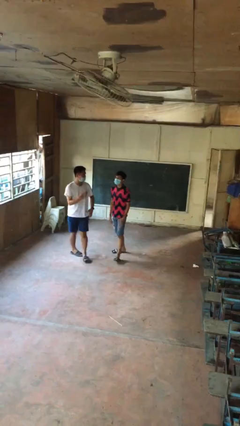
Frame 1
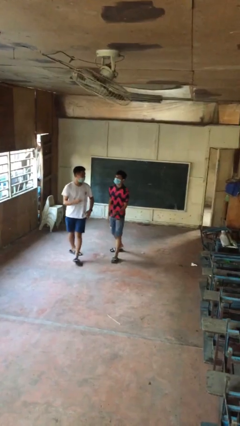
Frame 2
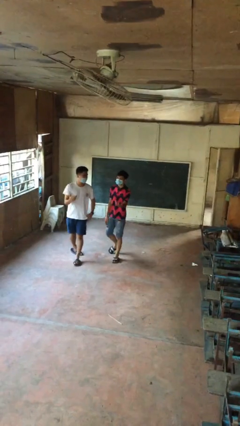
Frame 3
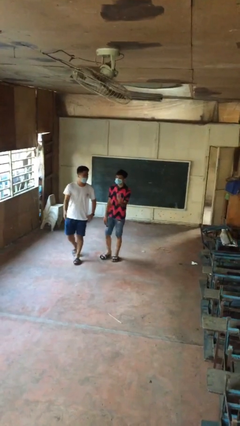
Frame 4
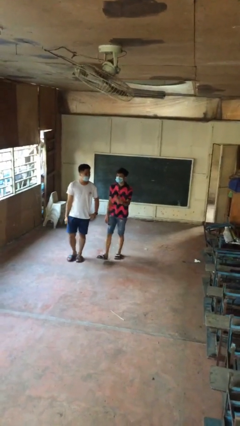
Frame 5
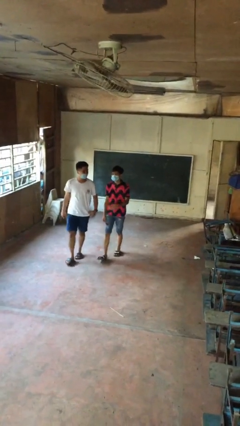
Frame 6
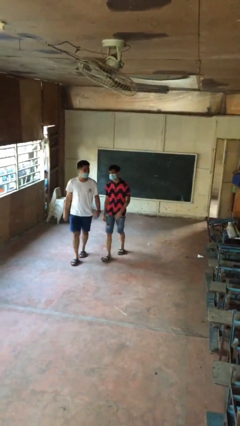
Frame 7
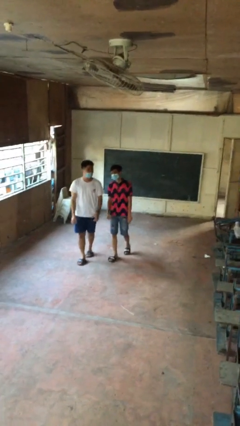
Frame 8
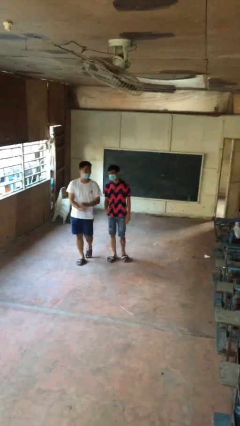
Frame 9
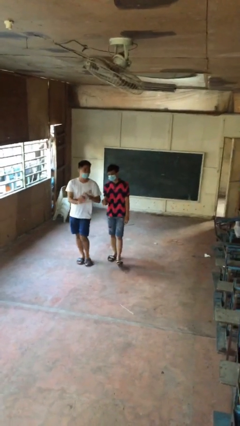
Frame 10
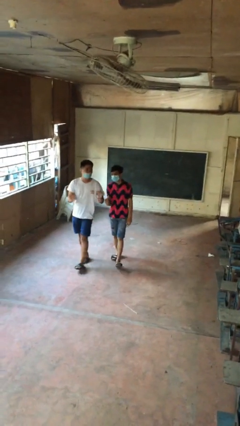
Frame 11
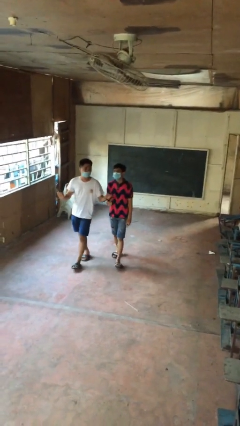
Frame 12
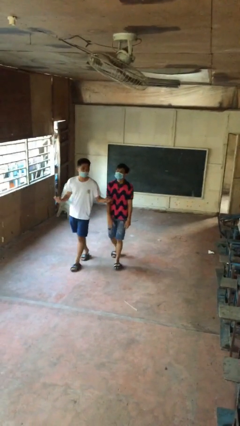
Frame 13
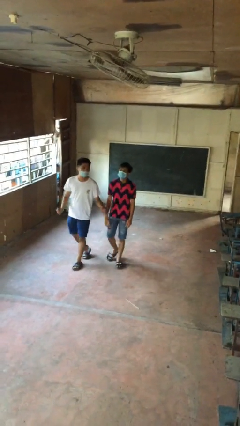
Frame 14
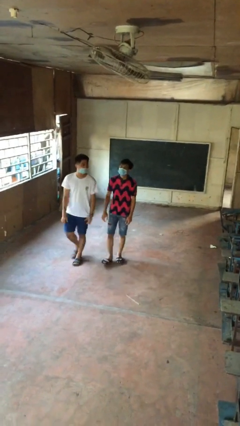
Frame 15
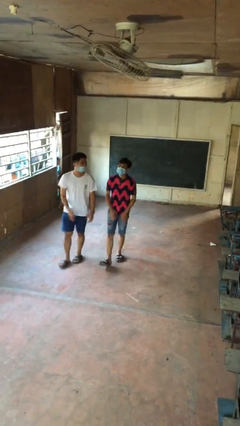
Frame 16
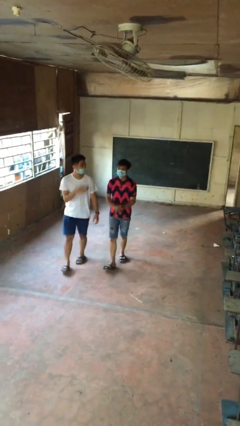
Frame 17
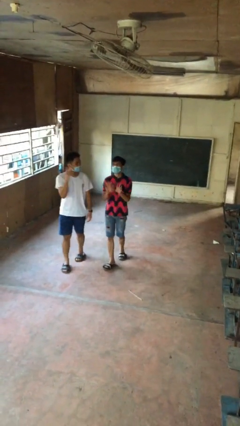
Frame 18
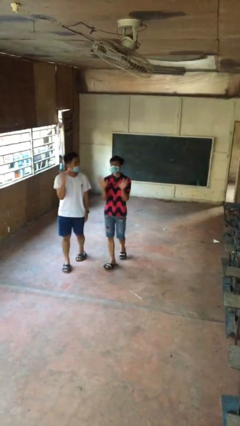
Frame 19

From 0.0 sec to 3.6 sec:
person talks to person

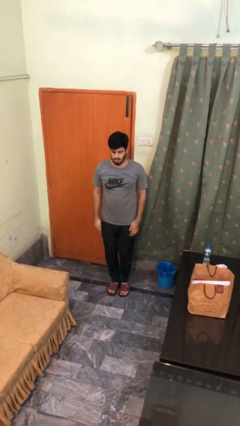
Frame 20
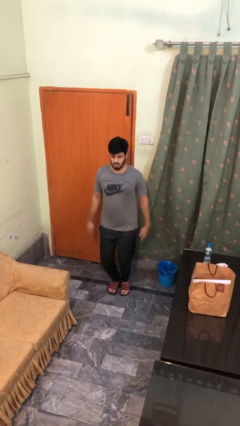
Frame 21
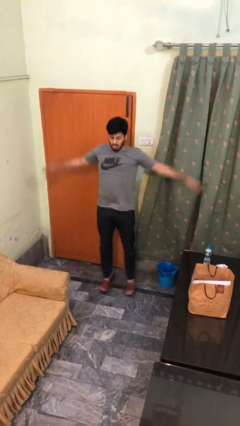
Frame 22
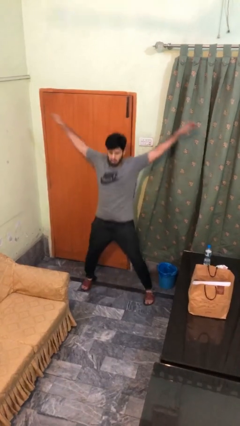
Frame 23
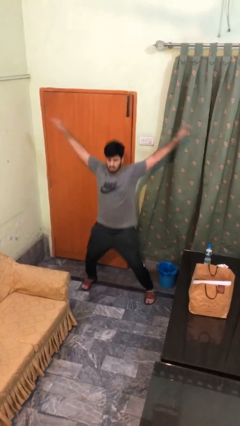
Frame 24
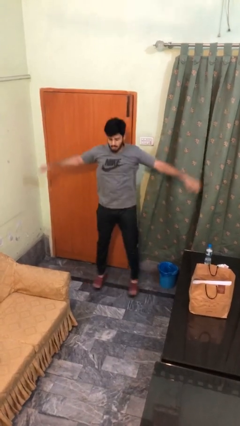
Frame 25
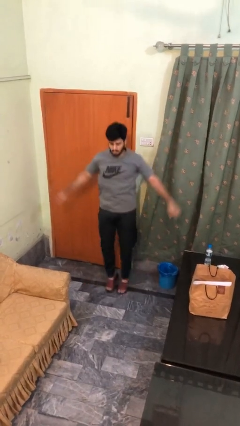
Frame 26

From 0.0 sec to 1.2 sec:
person exercises with jumping jacks

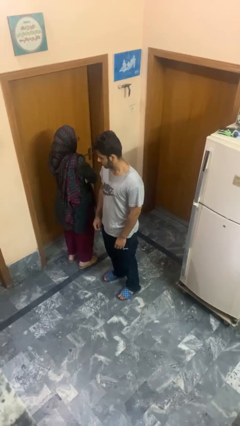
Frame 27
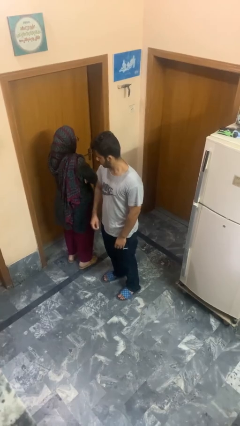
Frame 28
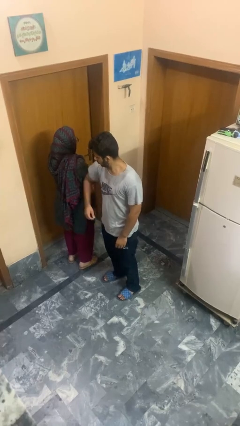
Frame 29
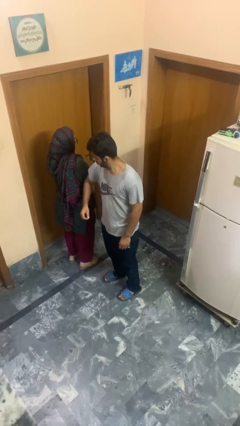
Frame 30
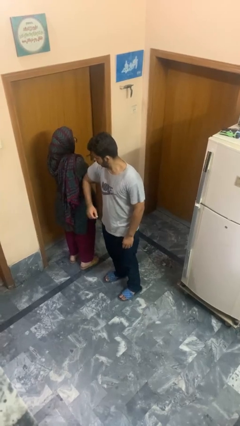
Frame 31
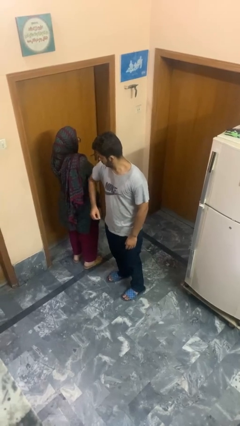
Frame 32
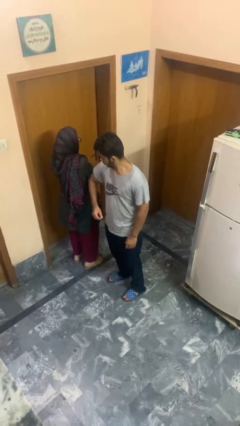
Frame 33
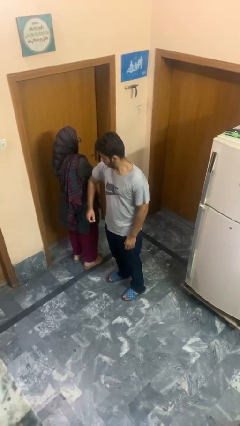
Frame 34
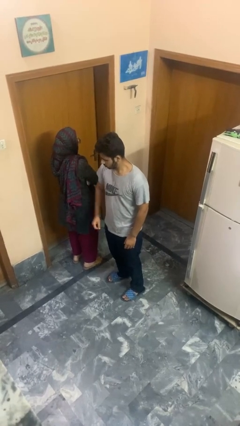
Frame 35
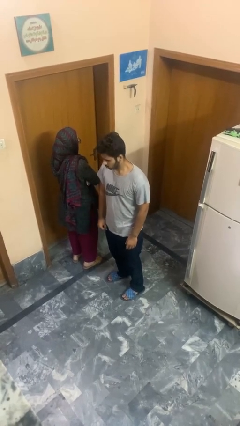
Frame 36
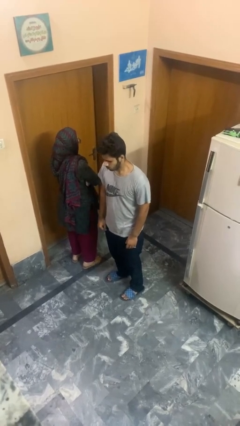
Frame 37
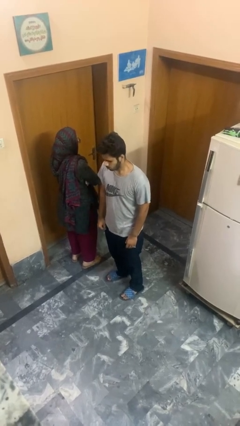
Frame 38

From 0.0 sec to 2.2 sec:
person nudges person with elbow

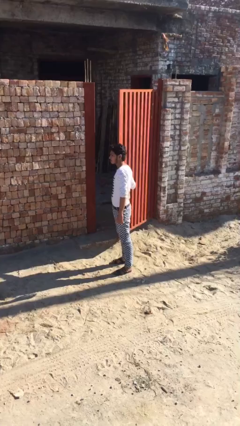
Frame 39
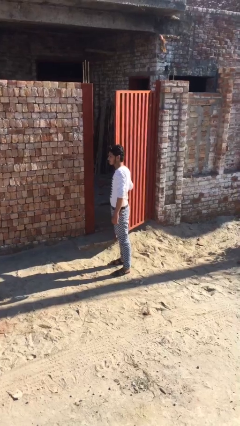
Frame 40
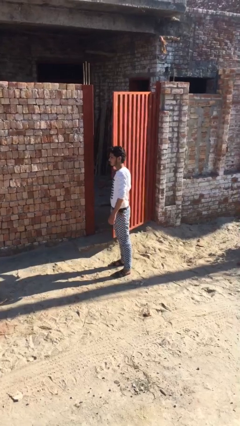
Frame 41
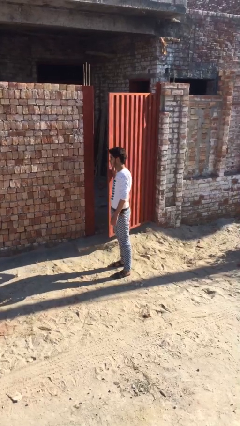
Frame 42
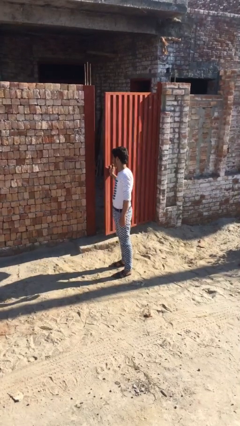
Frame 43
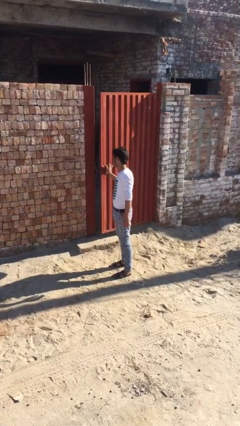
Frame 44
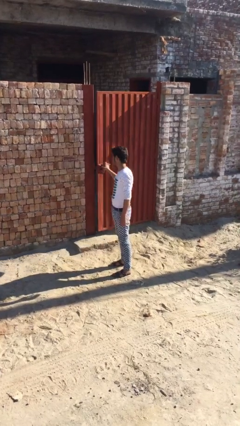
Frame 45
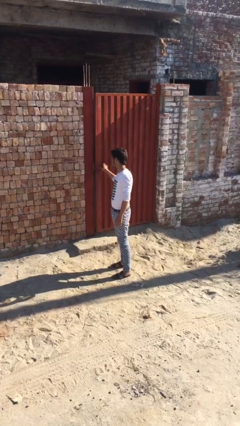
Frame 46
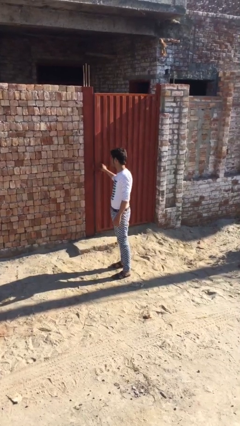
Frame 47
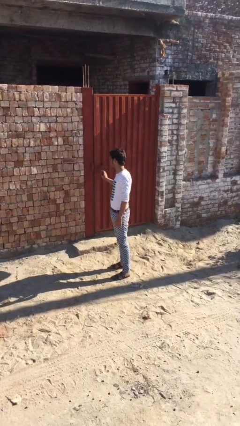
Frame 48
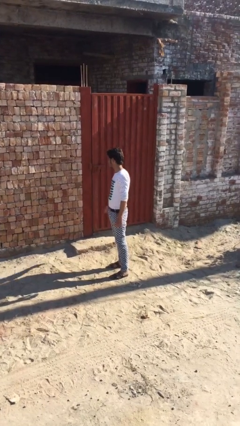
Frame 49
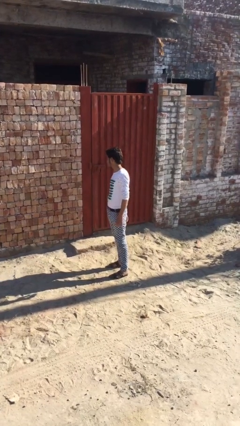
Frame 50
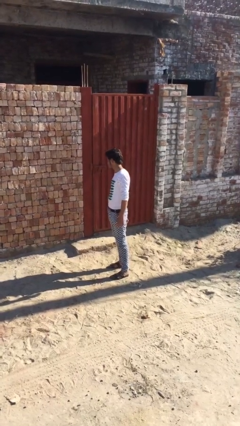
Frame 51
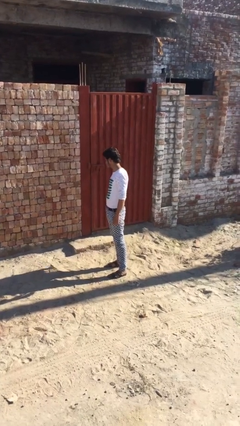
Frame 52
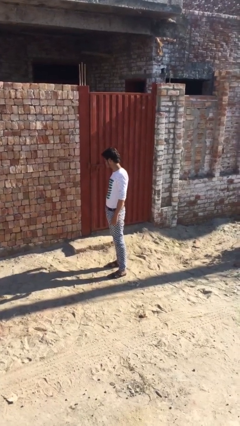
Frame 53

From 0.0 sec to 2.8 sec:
person closes facility door

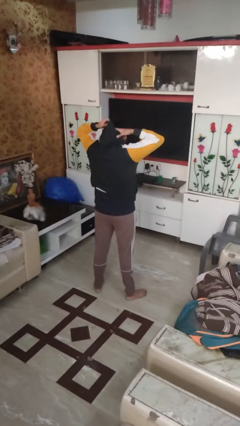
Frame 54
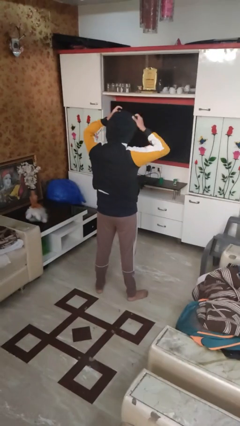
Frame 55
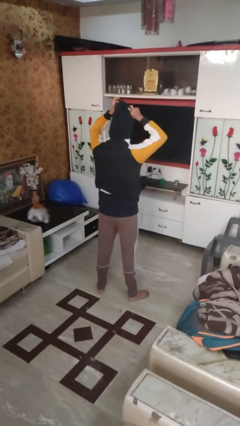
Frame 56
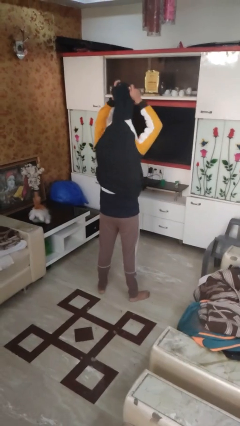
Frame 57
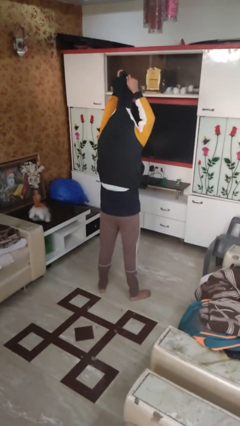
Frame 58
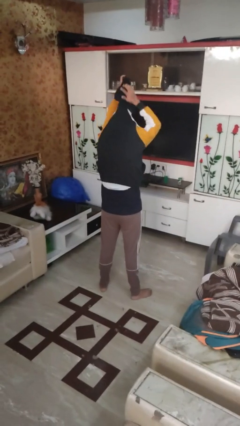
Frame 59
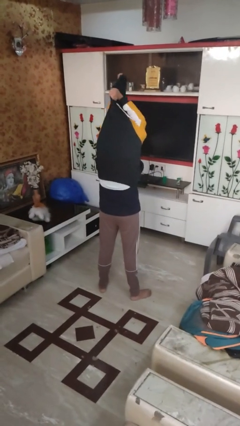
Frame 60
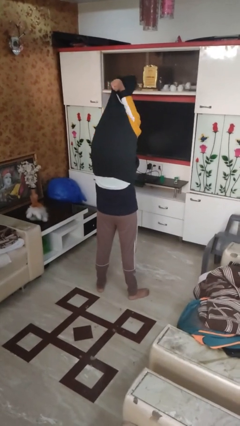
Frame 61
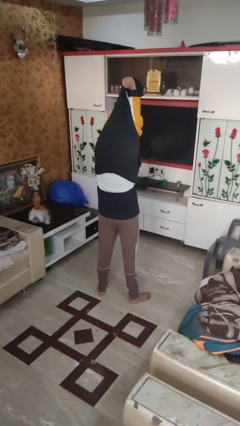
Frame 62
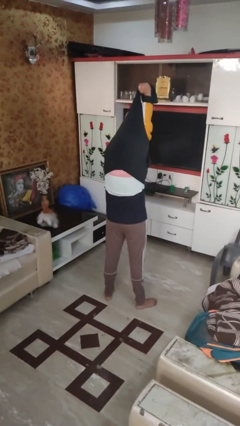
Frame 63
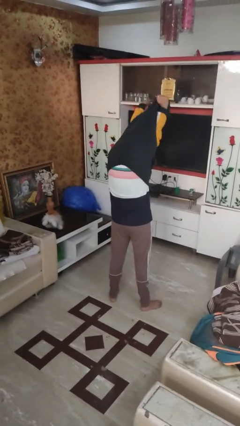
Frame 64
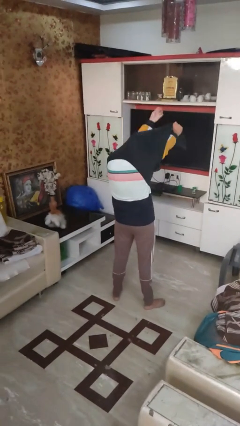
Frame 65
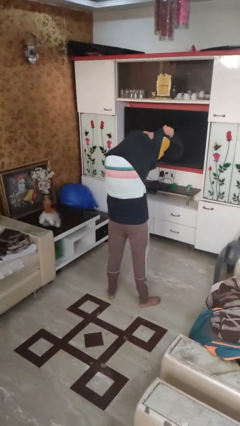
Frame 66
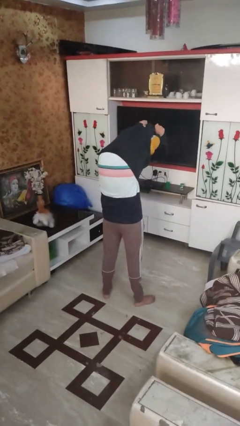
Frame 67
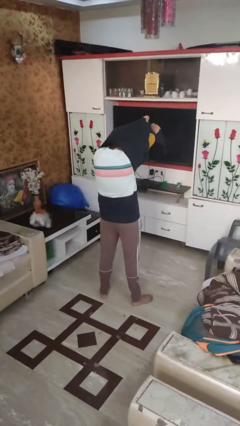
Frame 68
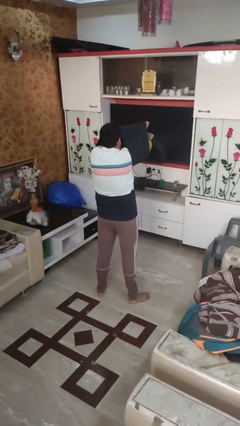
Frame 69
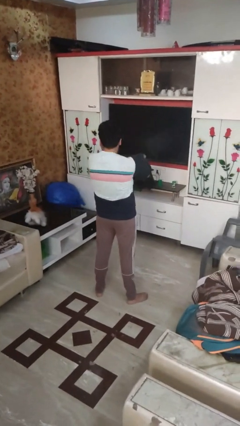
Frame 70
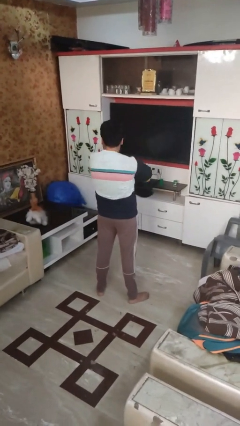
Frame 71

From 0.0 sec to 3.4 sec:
person takes off hoodie

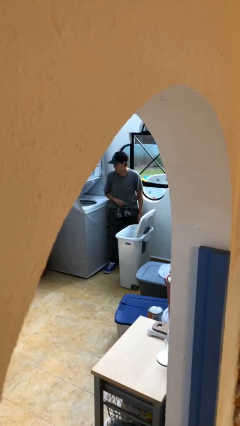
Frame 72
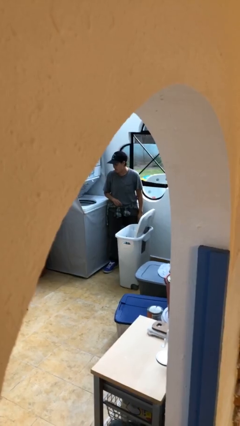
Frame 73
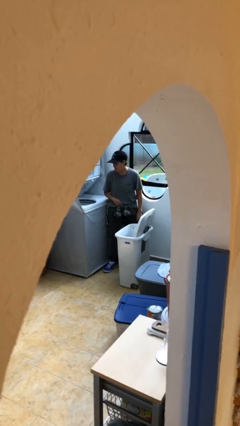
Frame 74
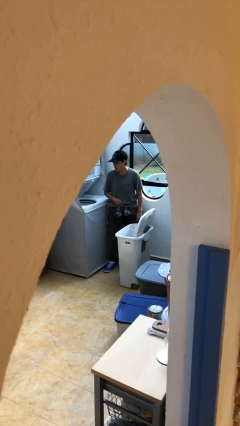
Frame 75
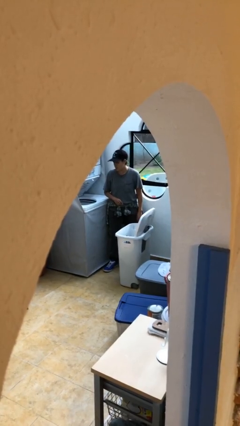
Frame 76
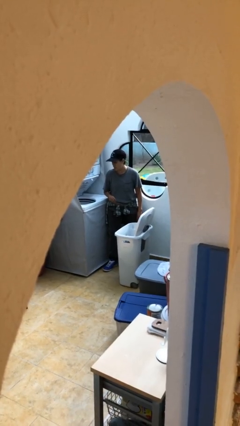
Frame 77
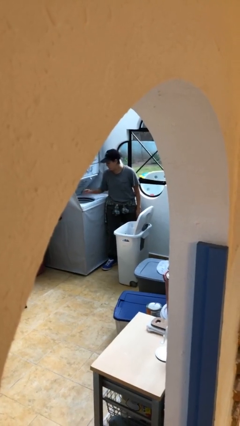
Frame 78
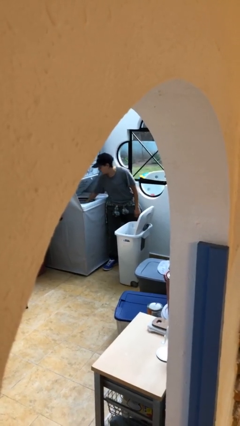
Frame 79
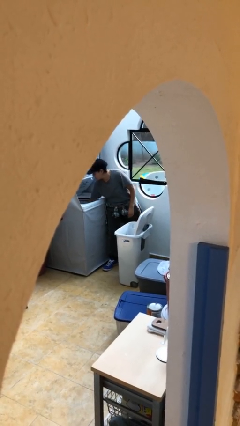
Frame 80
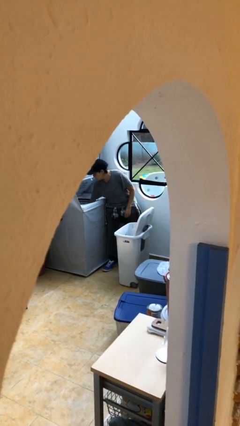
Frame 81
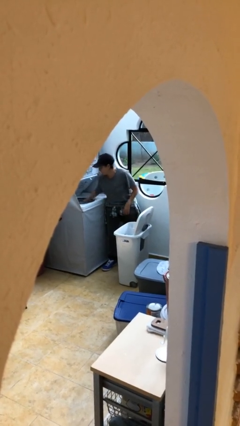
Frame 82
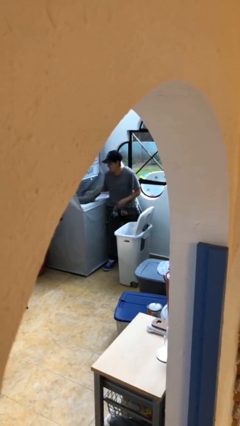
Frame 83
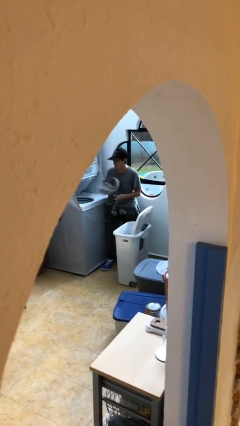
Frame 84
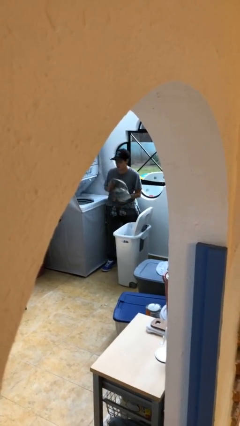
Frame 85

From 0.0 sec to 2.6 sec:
person loads clotheswasher

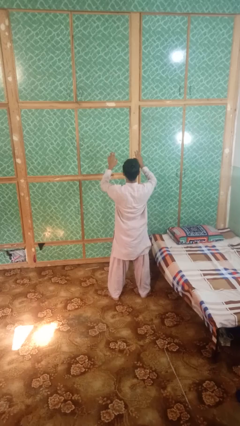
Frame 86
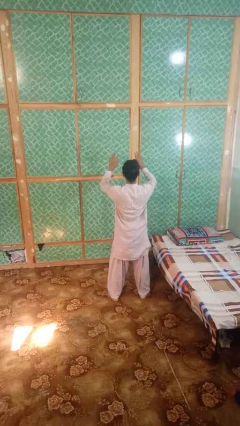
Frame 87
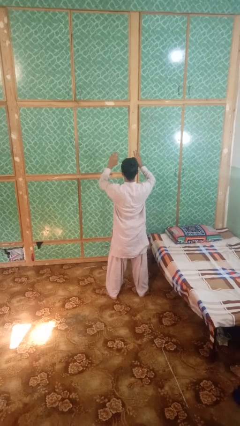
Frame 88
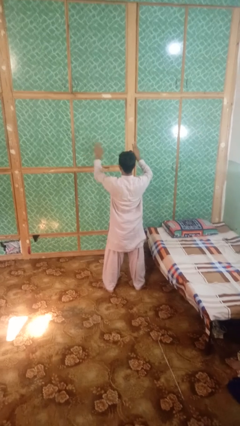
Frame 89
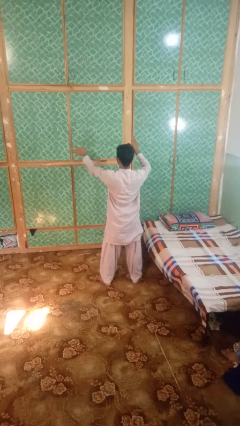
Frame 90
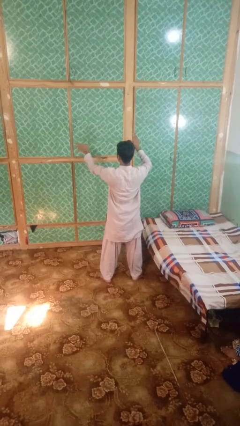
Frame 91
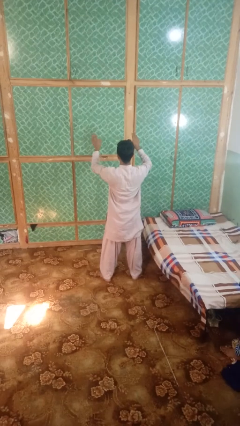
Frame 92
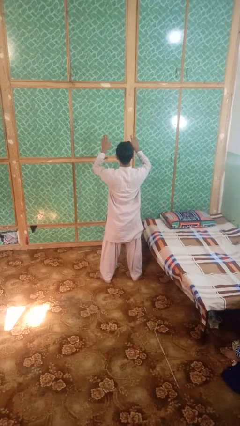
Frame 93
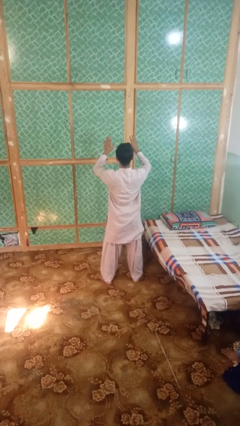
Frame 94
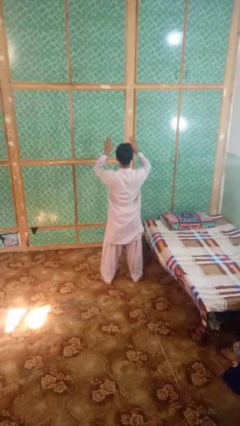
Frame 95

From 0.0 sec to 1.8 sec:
person gestures swipe left
